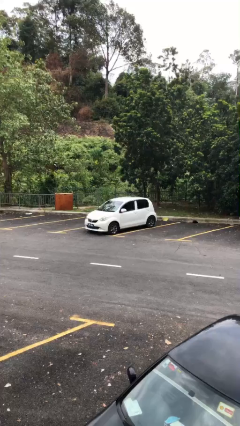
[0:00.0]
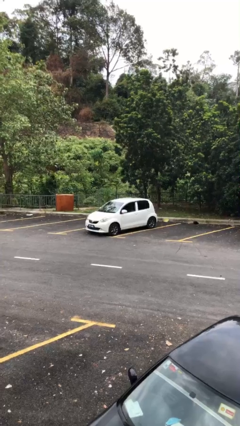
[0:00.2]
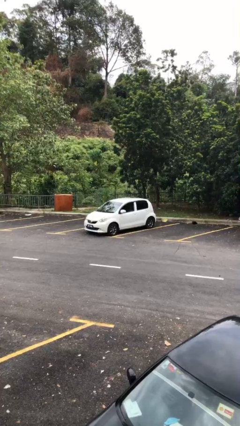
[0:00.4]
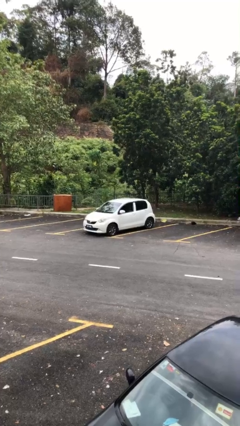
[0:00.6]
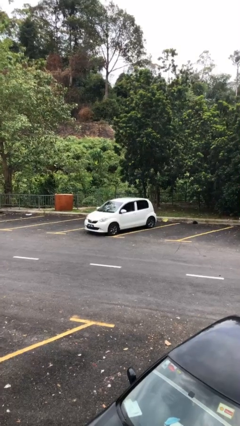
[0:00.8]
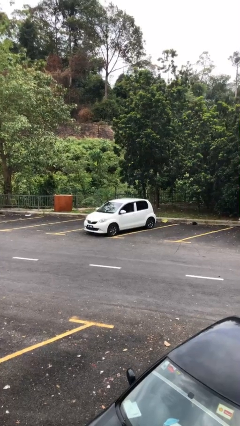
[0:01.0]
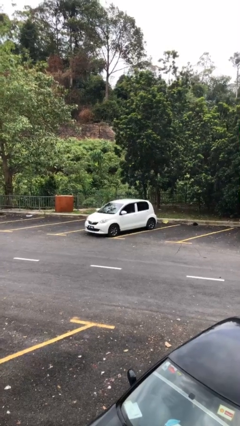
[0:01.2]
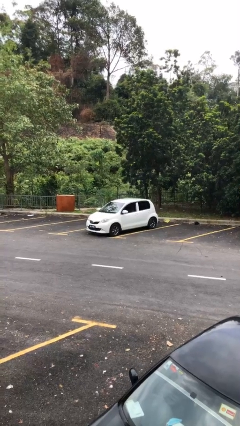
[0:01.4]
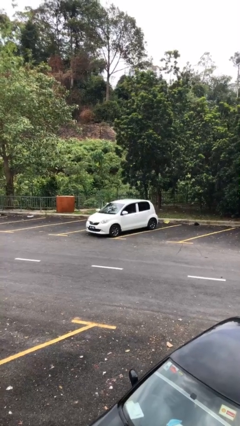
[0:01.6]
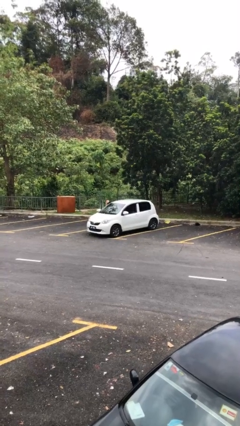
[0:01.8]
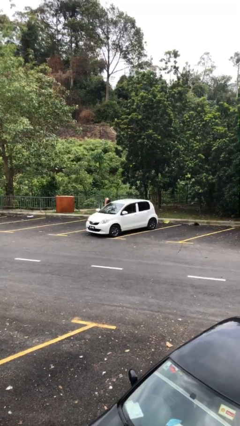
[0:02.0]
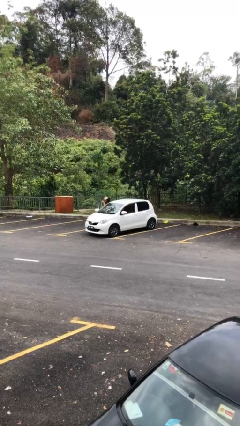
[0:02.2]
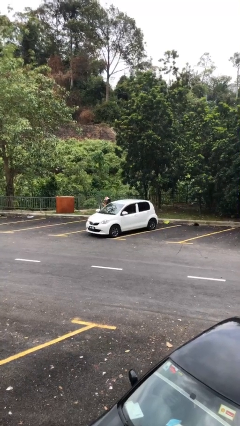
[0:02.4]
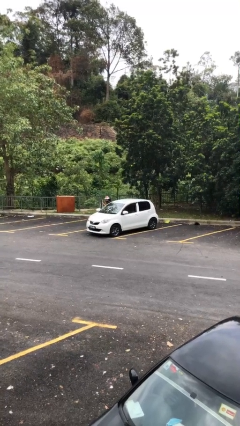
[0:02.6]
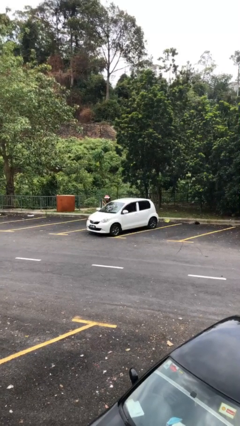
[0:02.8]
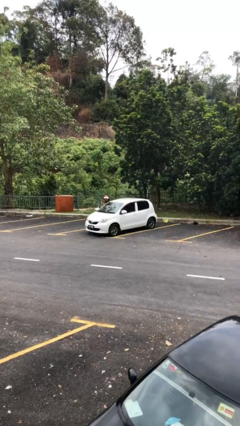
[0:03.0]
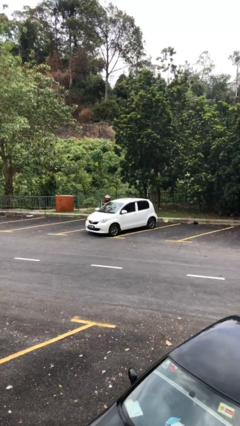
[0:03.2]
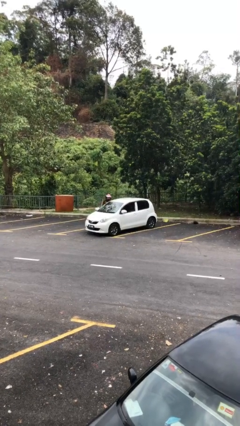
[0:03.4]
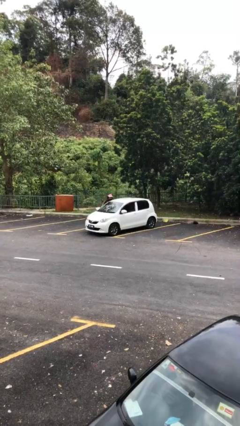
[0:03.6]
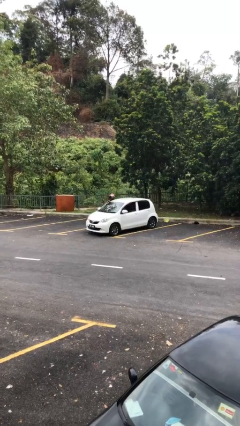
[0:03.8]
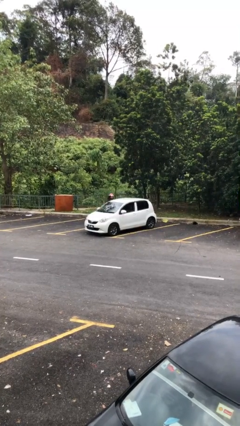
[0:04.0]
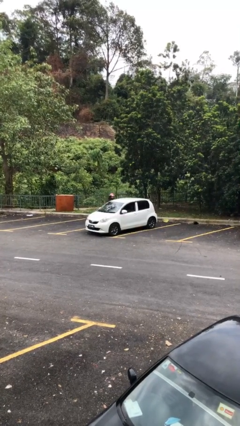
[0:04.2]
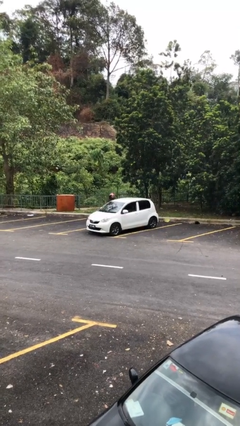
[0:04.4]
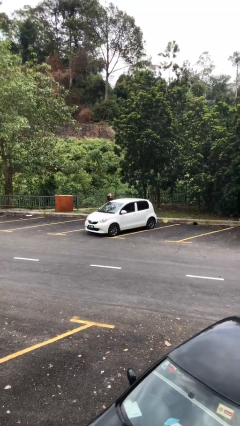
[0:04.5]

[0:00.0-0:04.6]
car drops off person

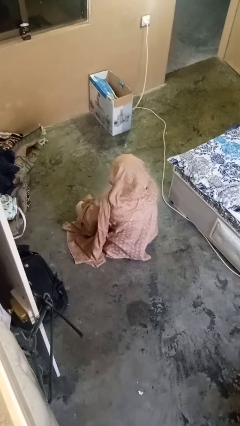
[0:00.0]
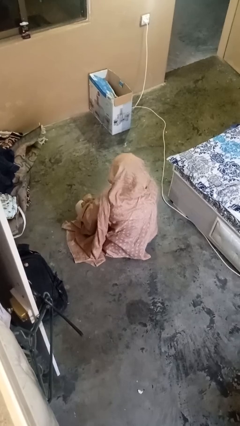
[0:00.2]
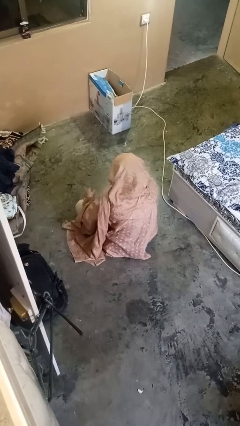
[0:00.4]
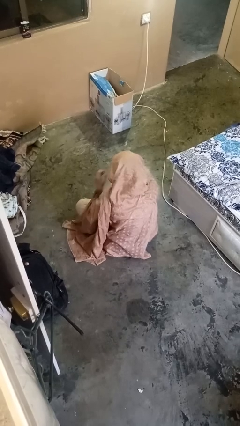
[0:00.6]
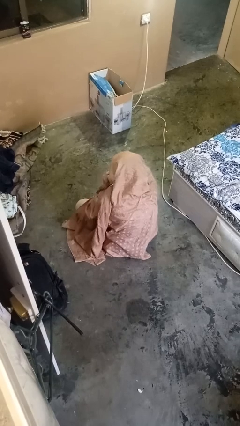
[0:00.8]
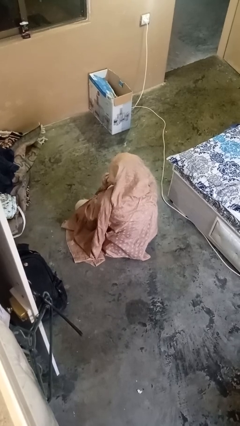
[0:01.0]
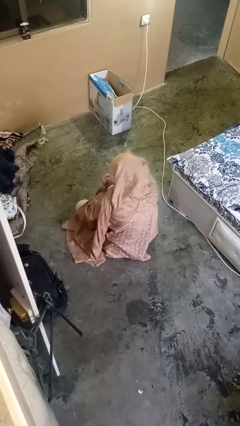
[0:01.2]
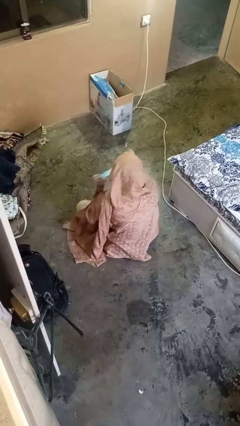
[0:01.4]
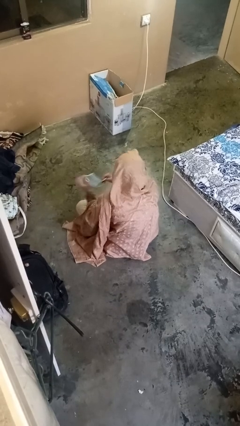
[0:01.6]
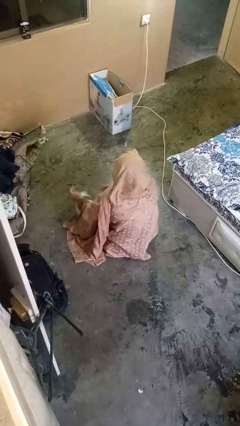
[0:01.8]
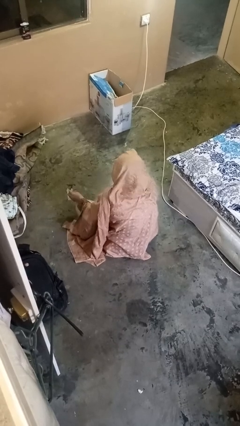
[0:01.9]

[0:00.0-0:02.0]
person takes off facemask

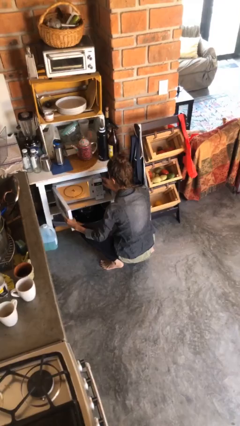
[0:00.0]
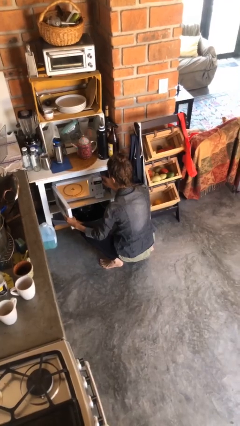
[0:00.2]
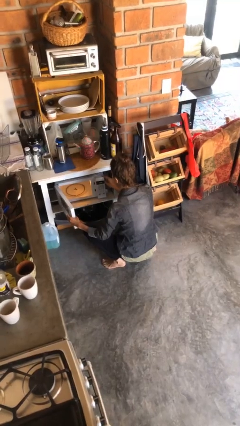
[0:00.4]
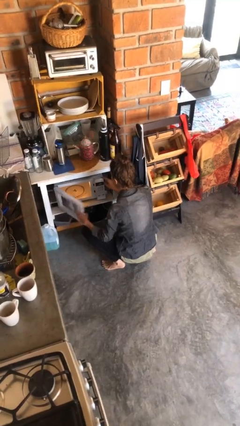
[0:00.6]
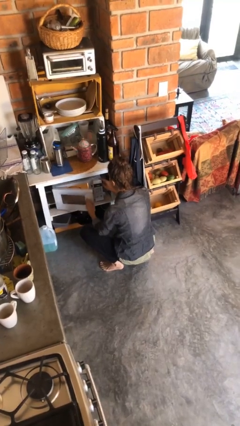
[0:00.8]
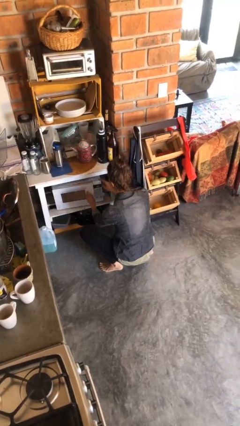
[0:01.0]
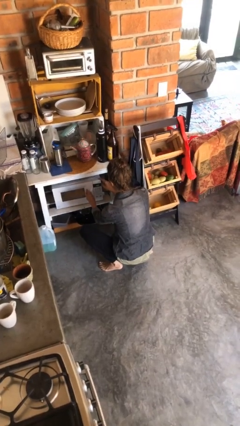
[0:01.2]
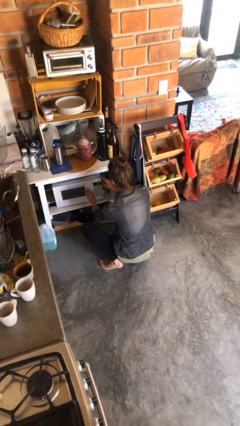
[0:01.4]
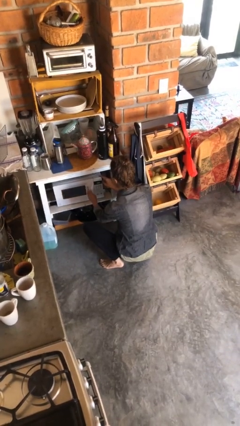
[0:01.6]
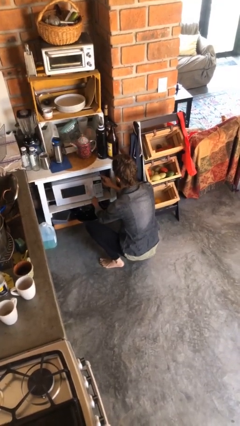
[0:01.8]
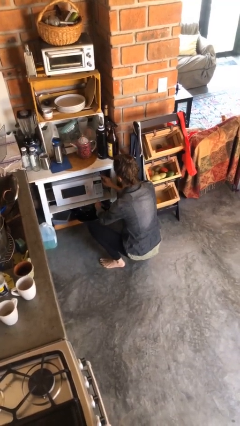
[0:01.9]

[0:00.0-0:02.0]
person closes microwave

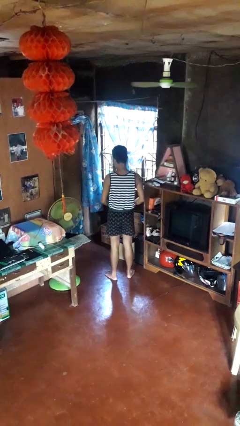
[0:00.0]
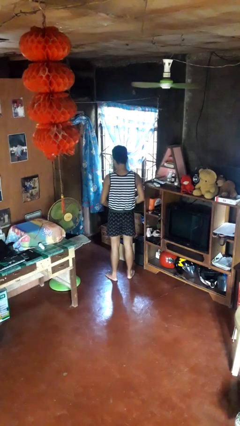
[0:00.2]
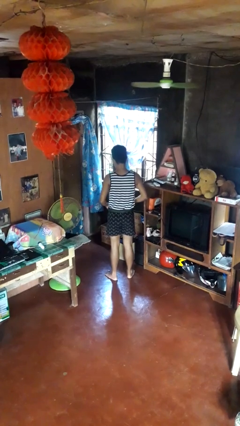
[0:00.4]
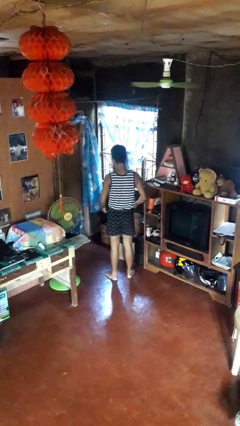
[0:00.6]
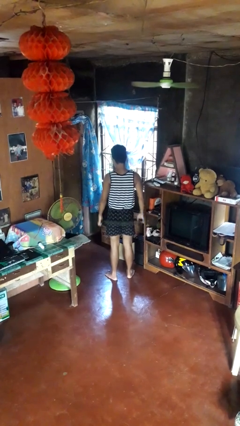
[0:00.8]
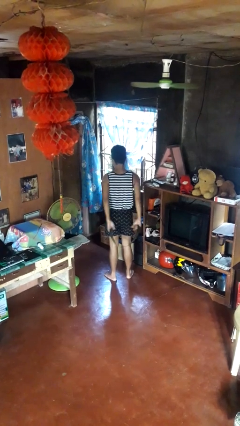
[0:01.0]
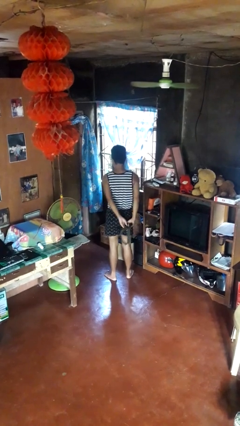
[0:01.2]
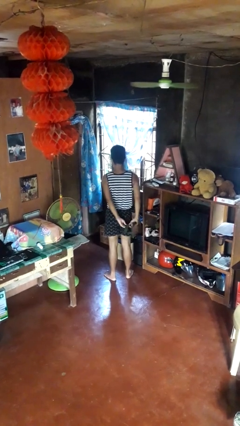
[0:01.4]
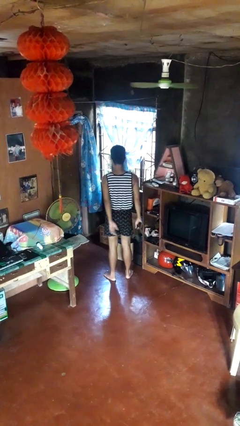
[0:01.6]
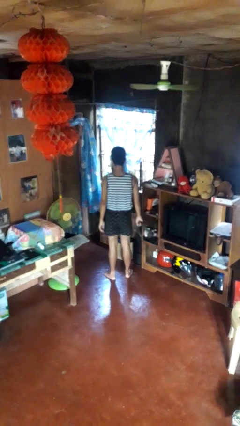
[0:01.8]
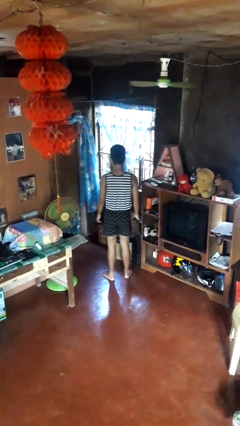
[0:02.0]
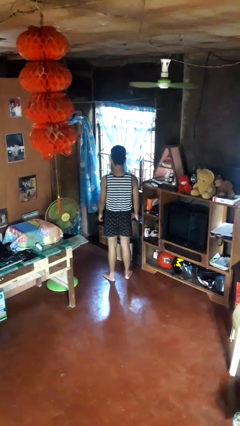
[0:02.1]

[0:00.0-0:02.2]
person takes off belt

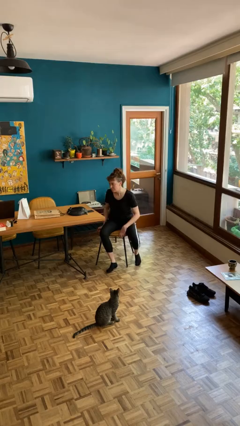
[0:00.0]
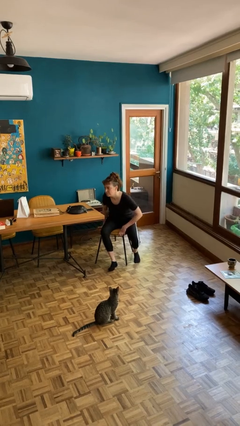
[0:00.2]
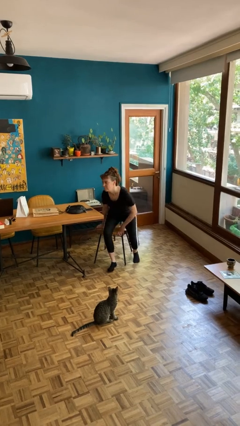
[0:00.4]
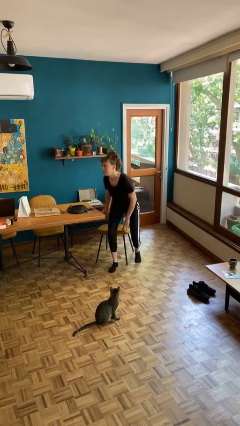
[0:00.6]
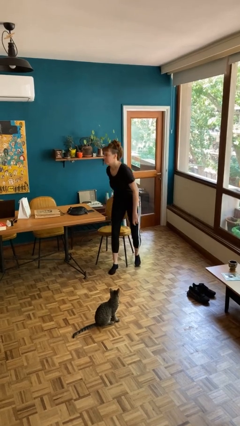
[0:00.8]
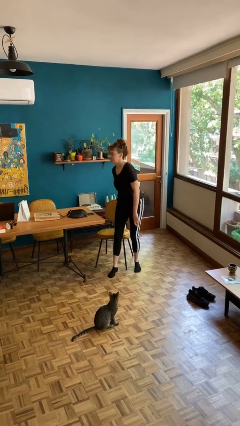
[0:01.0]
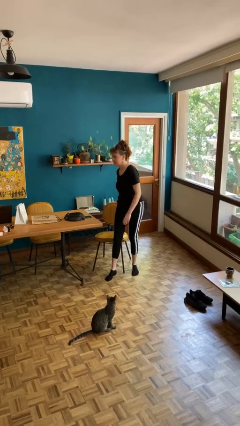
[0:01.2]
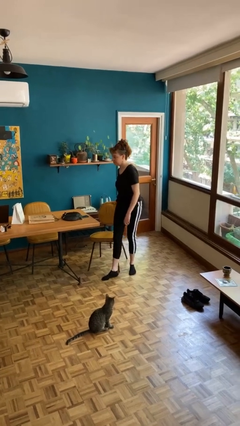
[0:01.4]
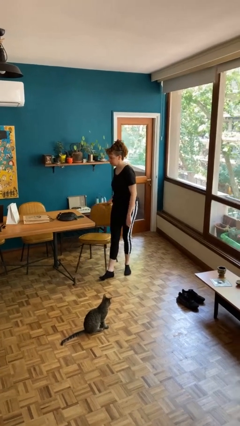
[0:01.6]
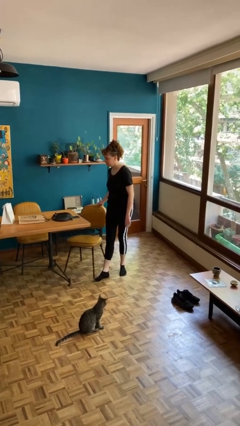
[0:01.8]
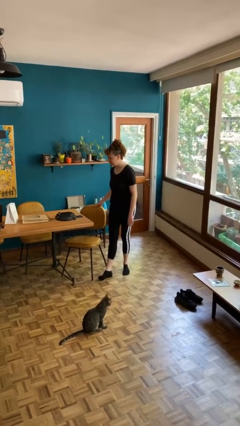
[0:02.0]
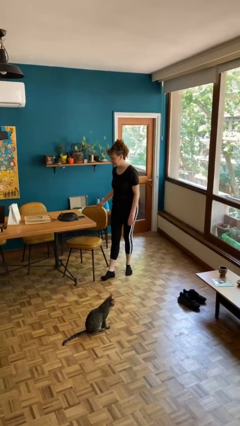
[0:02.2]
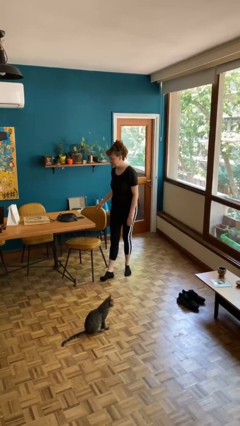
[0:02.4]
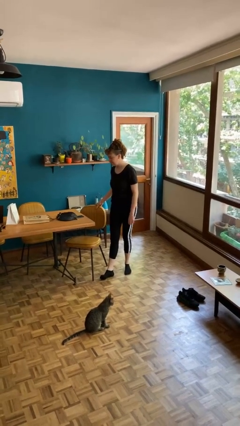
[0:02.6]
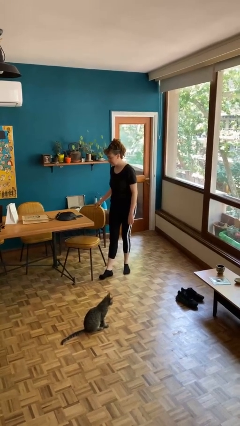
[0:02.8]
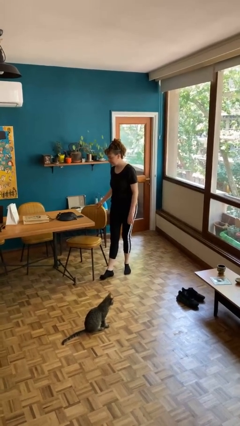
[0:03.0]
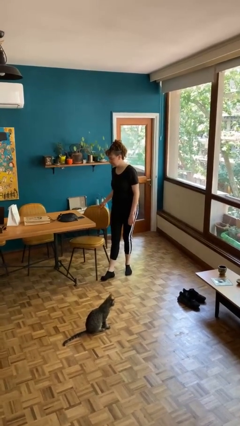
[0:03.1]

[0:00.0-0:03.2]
person stands up

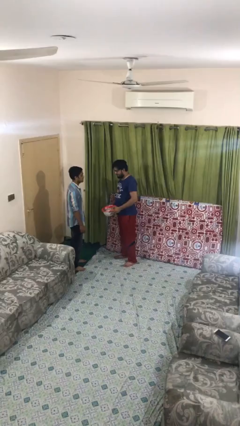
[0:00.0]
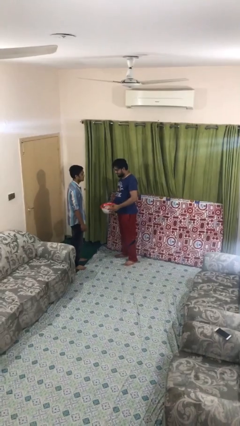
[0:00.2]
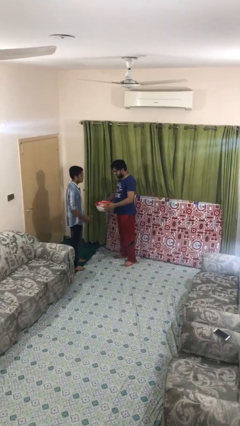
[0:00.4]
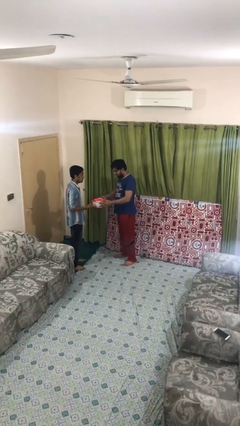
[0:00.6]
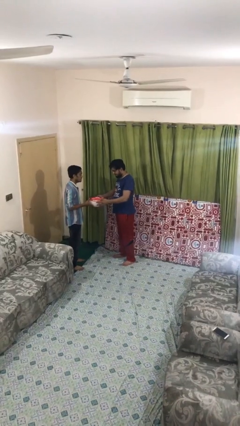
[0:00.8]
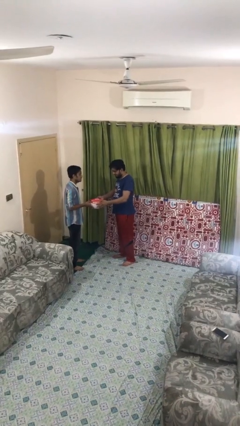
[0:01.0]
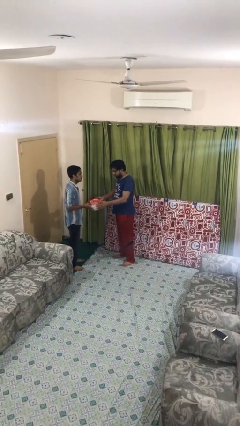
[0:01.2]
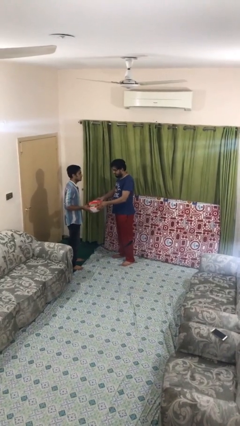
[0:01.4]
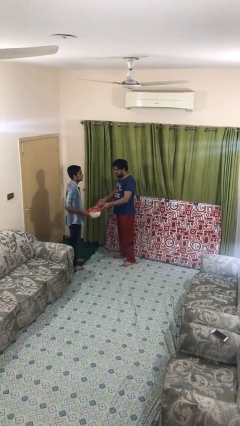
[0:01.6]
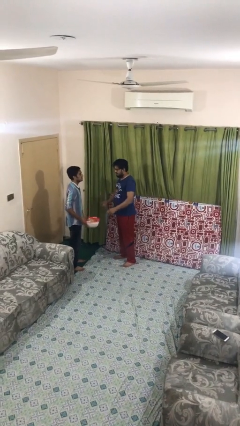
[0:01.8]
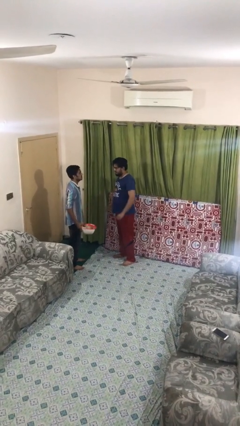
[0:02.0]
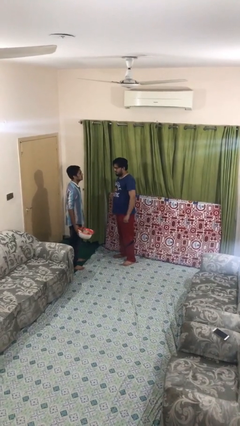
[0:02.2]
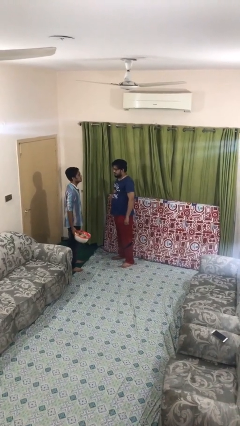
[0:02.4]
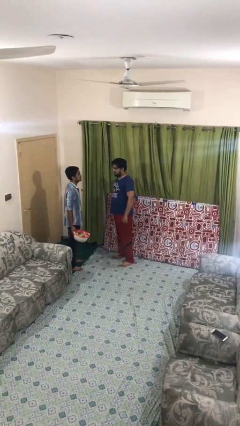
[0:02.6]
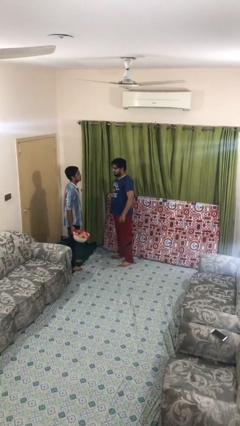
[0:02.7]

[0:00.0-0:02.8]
person transfers object to person

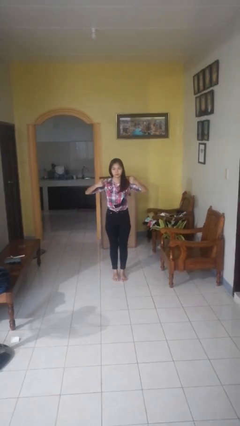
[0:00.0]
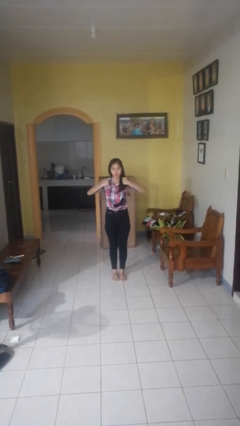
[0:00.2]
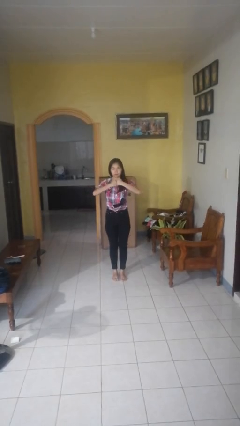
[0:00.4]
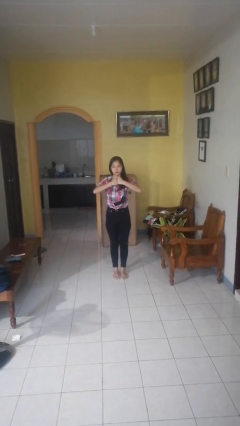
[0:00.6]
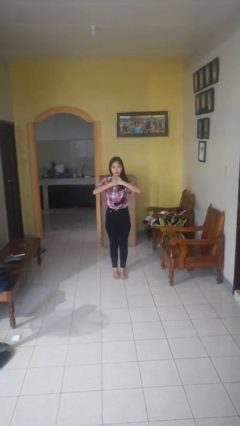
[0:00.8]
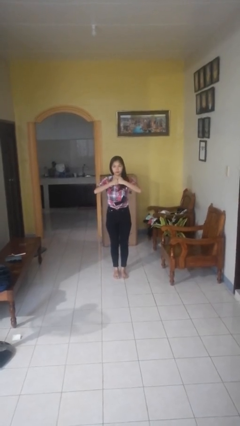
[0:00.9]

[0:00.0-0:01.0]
person gestures zoom out
